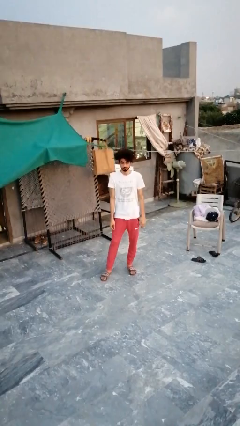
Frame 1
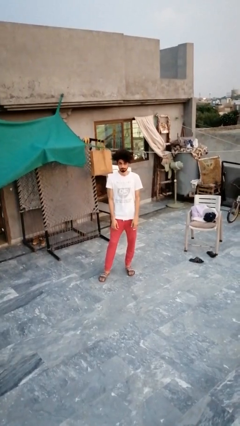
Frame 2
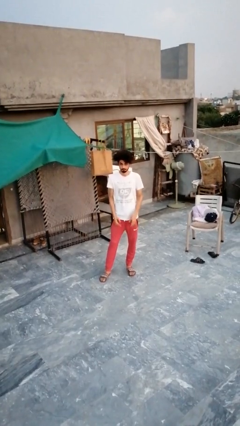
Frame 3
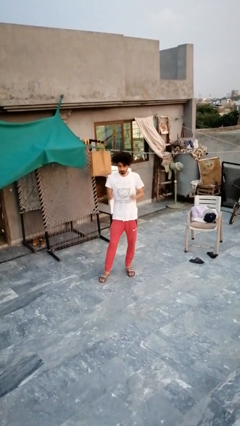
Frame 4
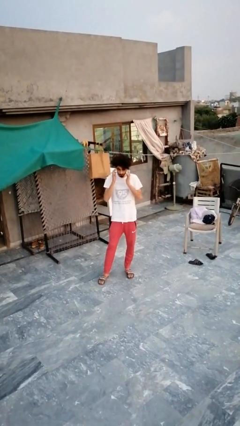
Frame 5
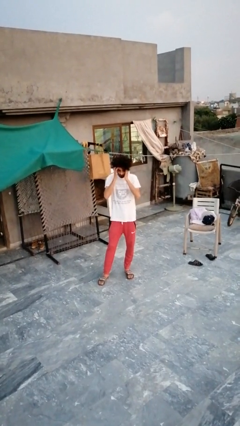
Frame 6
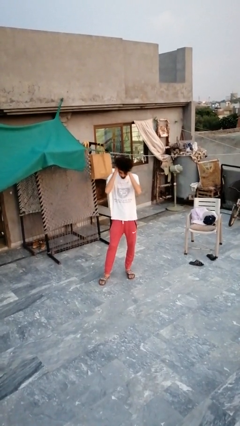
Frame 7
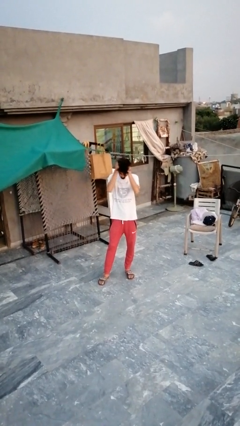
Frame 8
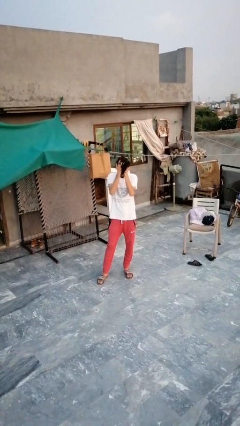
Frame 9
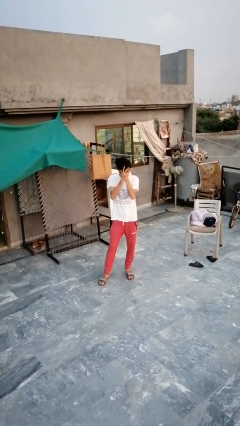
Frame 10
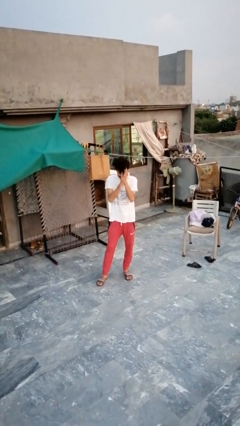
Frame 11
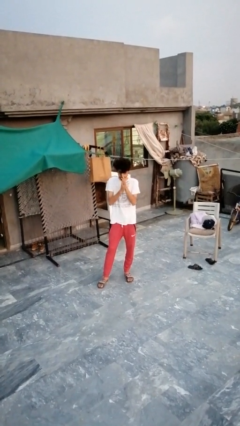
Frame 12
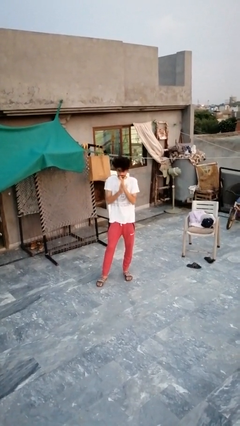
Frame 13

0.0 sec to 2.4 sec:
person strokes hair

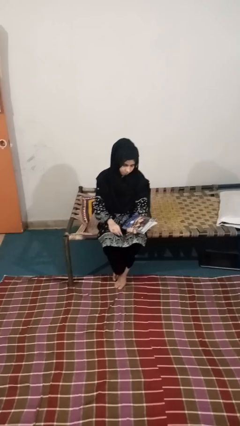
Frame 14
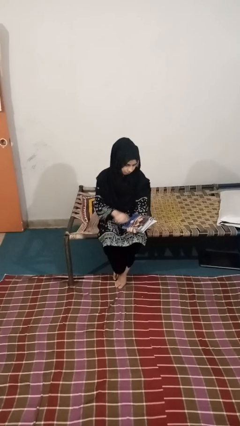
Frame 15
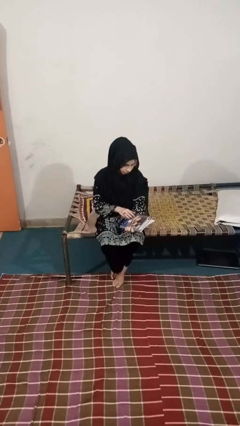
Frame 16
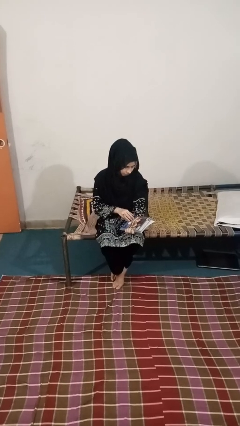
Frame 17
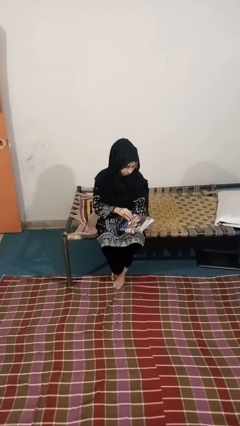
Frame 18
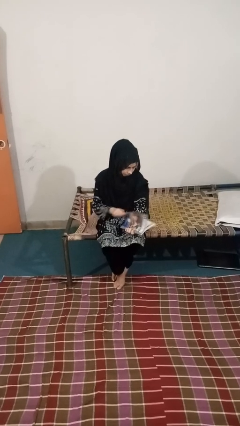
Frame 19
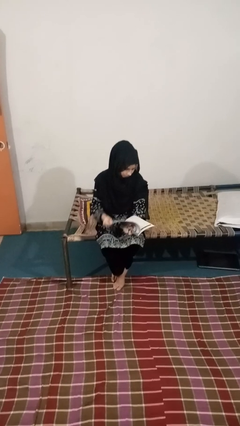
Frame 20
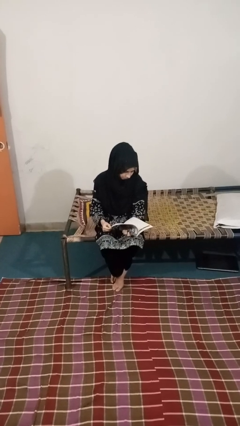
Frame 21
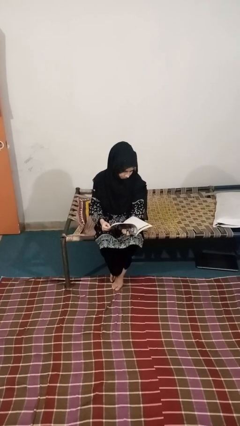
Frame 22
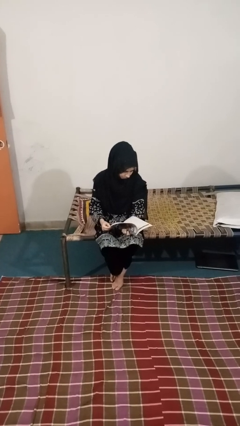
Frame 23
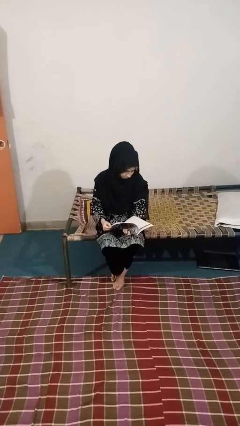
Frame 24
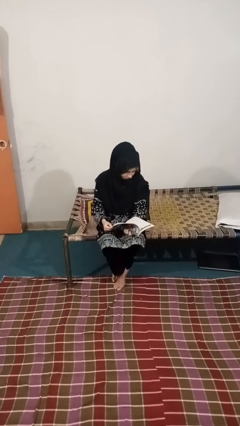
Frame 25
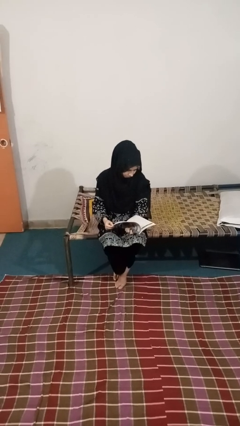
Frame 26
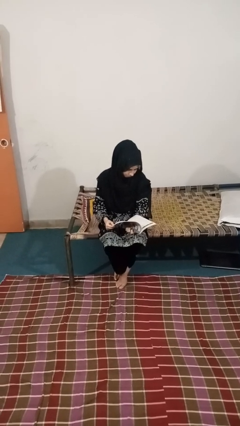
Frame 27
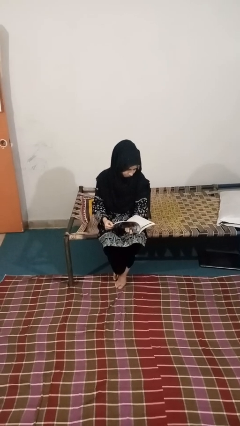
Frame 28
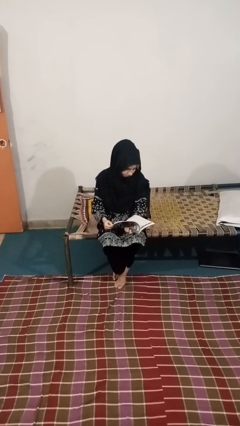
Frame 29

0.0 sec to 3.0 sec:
person reads book

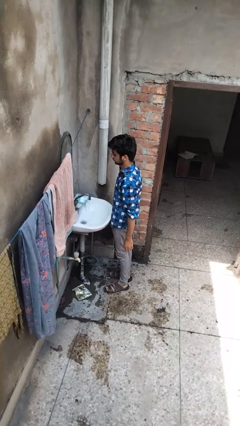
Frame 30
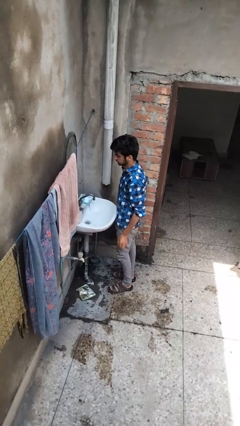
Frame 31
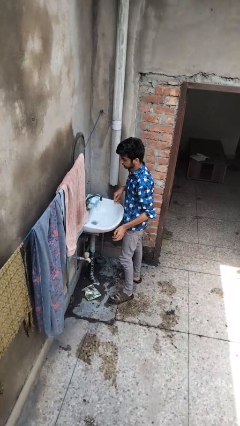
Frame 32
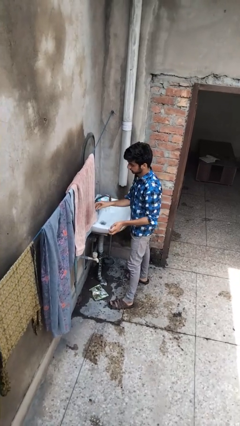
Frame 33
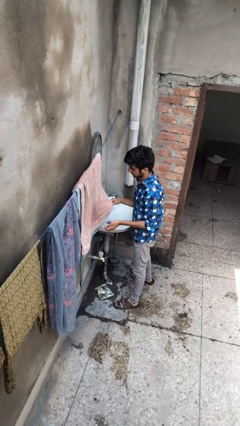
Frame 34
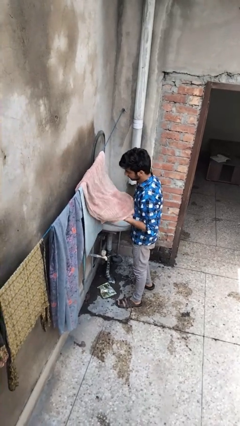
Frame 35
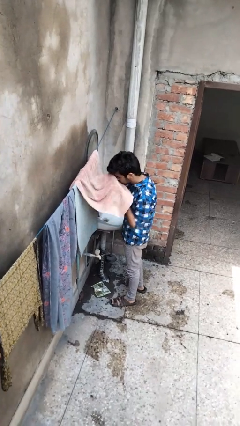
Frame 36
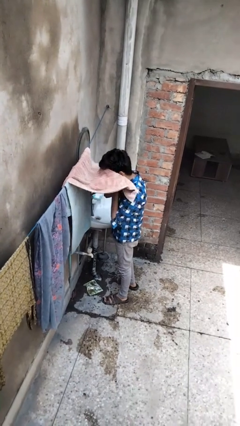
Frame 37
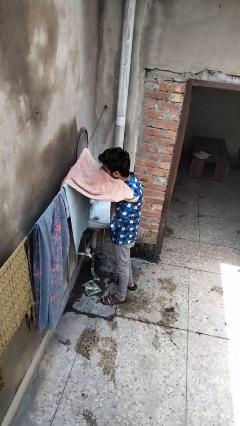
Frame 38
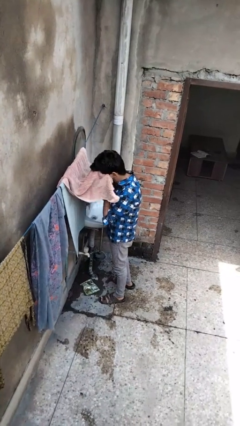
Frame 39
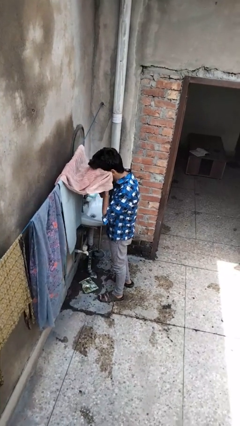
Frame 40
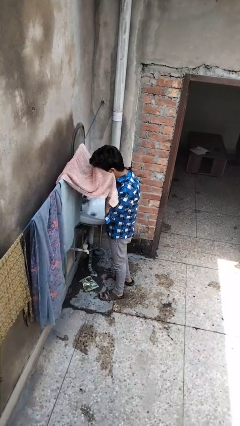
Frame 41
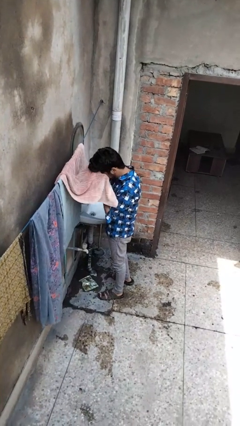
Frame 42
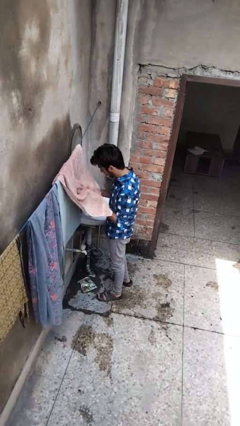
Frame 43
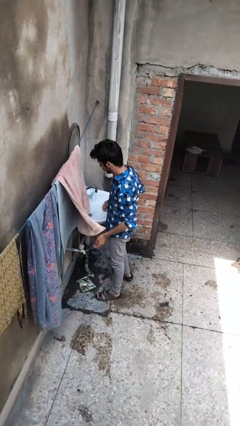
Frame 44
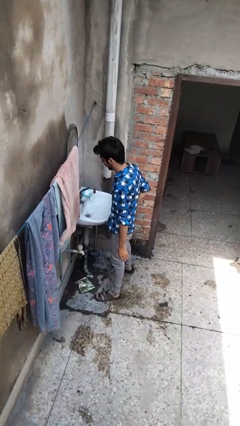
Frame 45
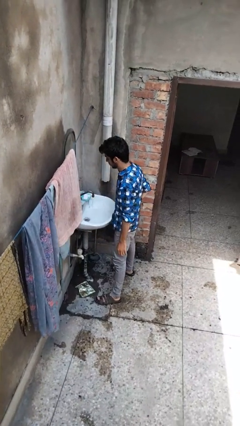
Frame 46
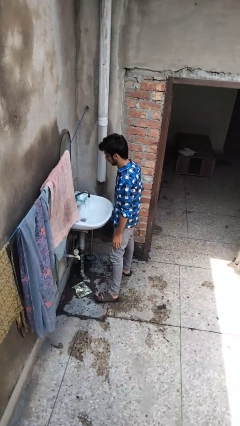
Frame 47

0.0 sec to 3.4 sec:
person dries face with towel

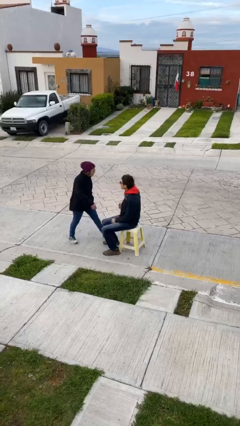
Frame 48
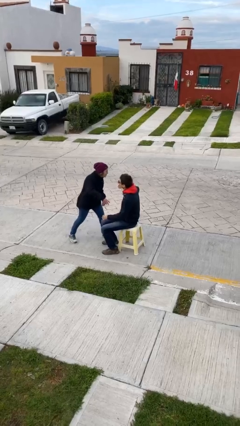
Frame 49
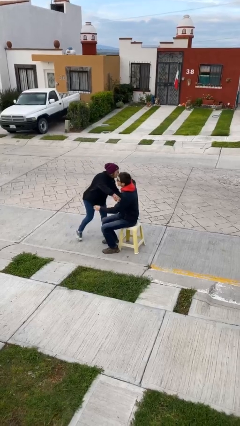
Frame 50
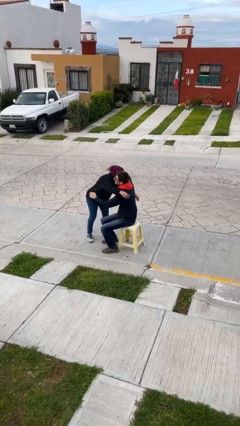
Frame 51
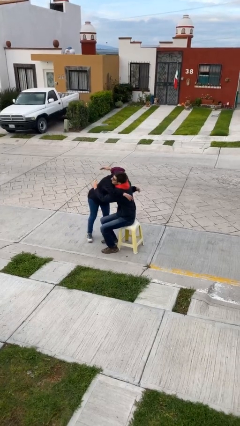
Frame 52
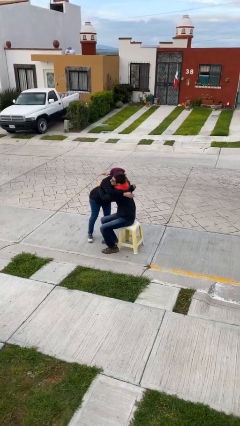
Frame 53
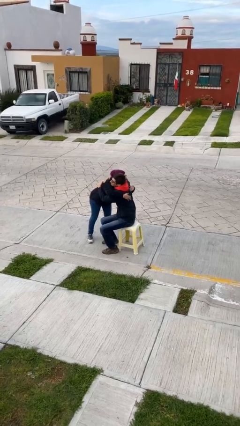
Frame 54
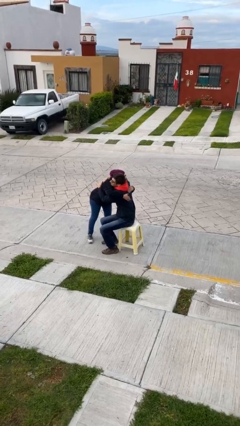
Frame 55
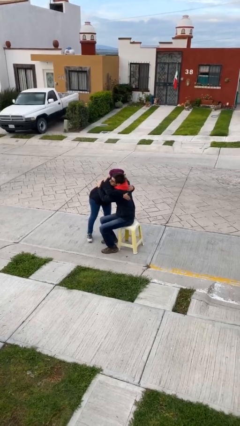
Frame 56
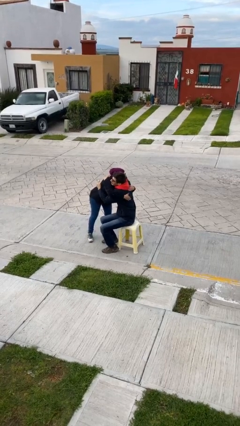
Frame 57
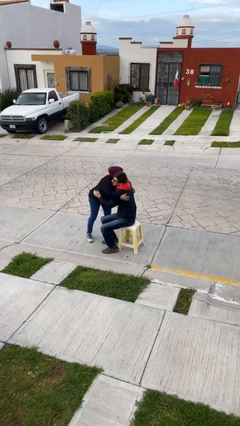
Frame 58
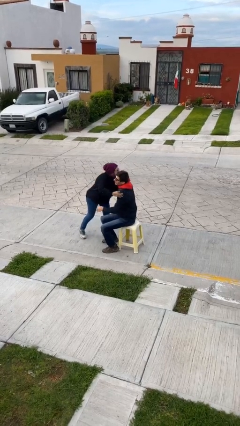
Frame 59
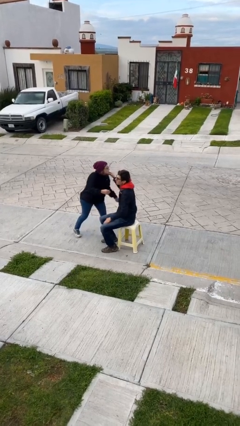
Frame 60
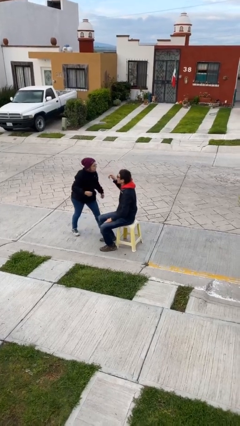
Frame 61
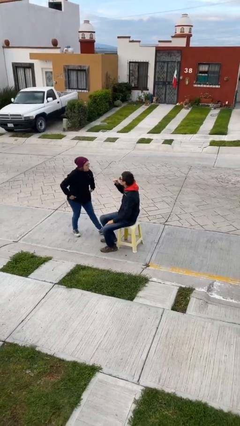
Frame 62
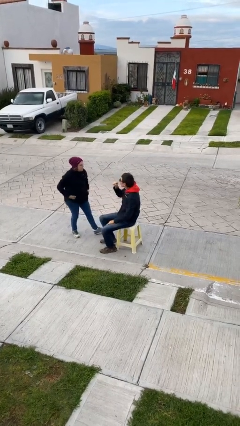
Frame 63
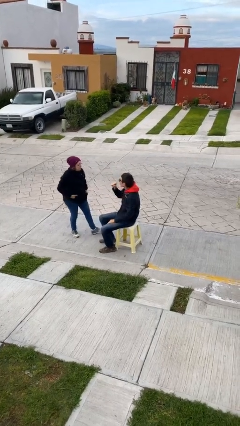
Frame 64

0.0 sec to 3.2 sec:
person embraces person

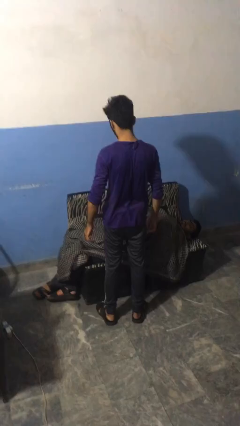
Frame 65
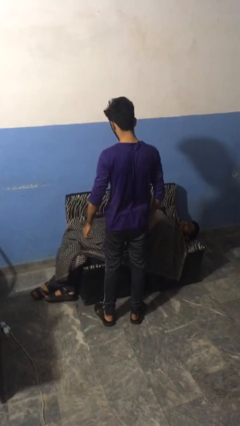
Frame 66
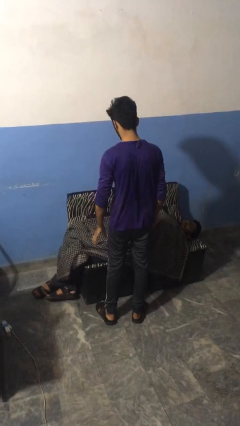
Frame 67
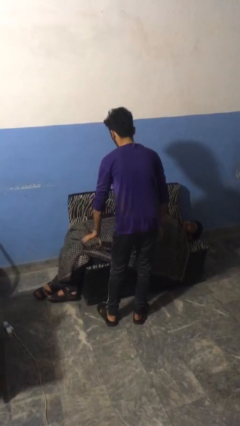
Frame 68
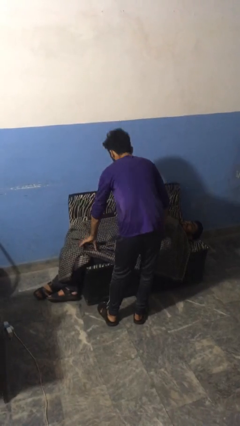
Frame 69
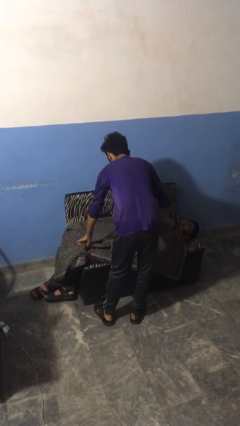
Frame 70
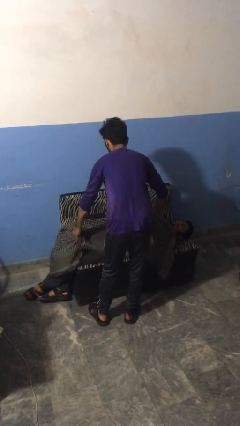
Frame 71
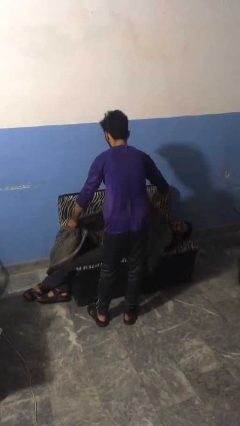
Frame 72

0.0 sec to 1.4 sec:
person uncovers friend with blanket

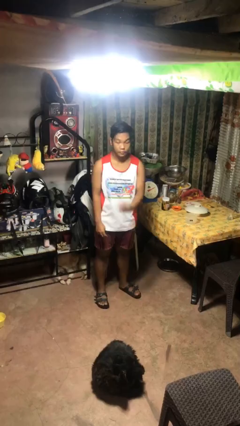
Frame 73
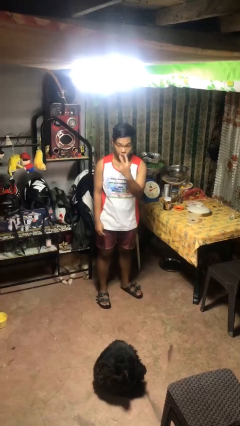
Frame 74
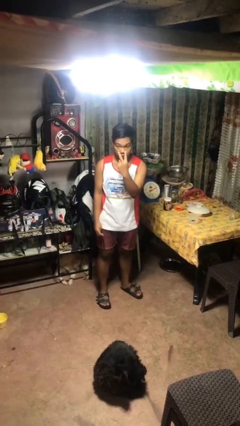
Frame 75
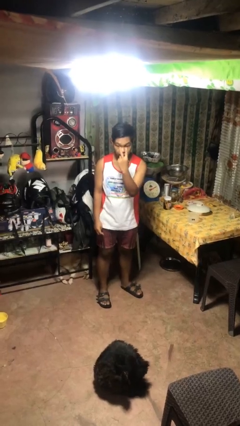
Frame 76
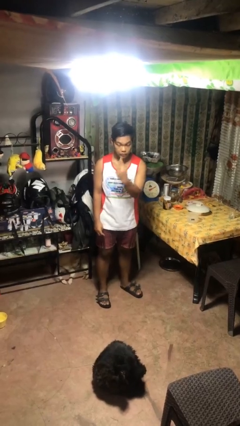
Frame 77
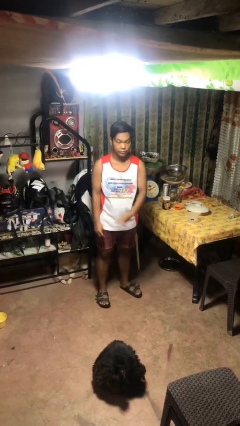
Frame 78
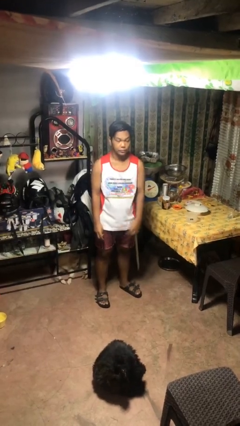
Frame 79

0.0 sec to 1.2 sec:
person gestures watch closely

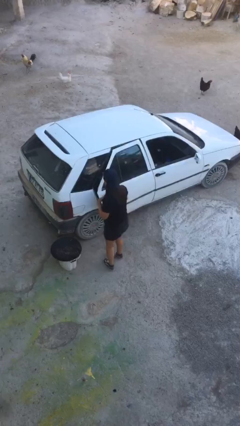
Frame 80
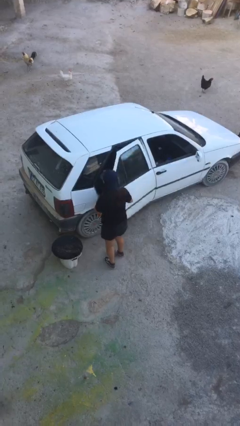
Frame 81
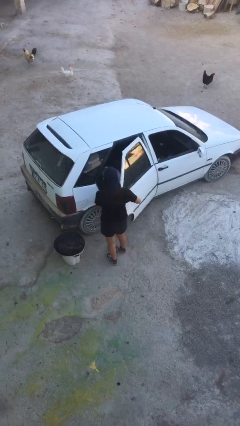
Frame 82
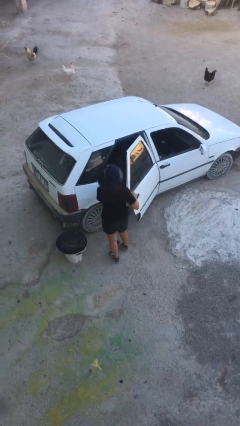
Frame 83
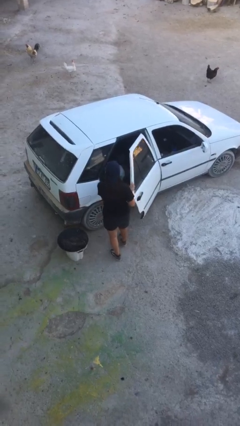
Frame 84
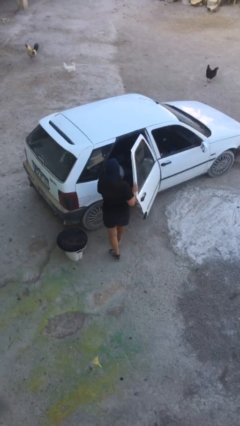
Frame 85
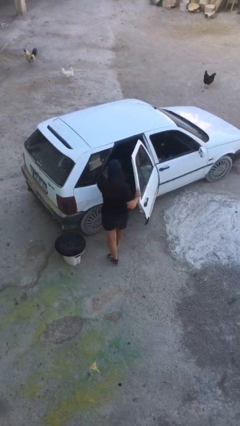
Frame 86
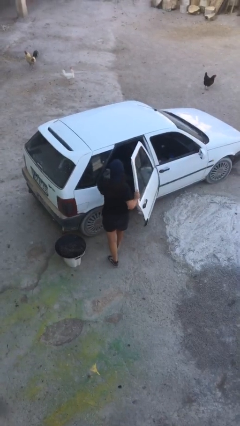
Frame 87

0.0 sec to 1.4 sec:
person opens car door

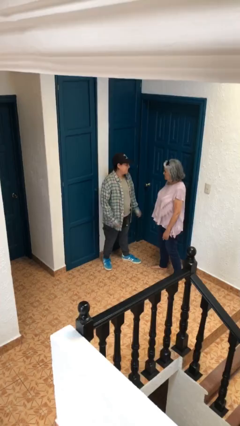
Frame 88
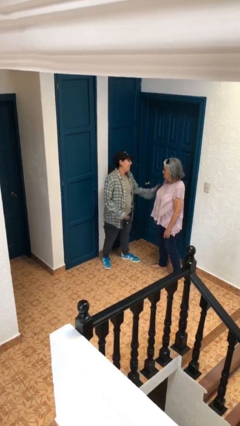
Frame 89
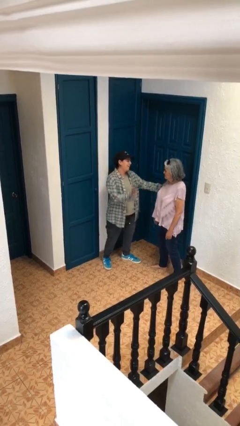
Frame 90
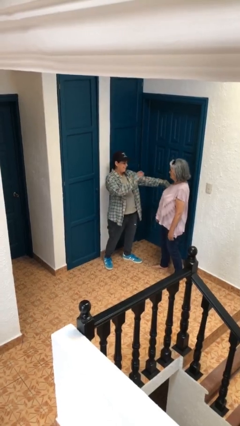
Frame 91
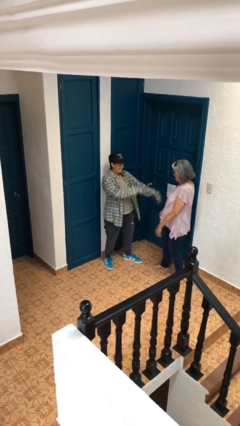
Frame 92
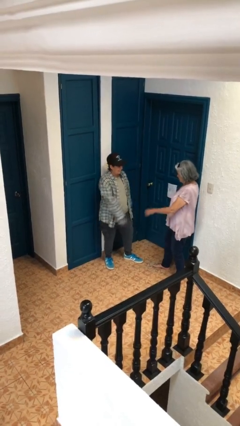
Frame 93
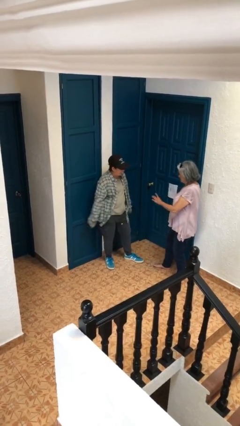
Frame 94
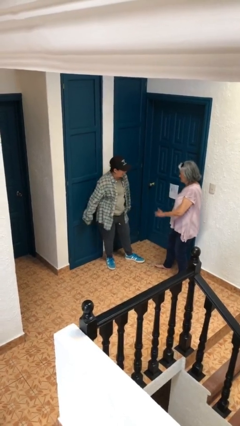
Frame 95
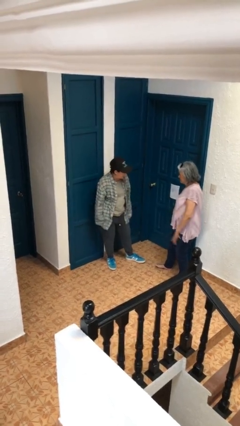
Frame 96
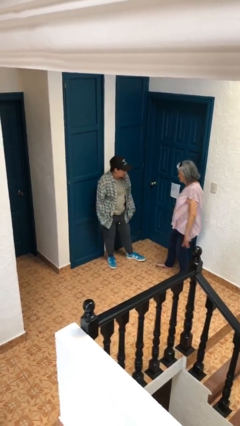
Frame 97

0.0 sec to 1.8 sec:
person shoves person
